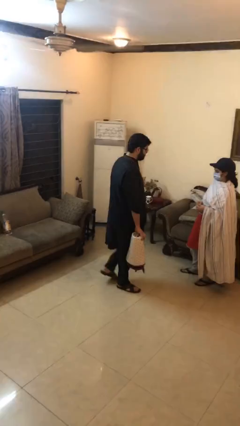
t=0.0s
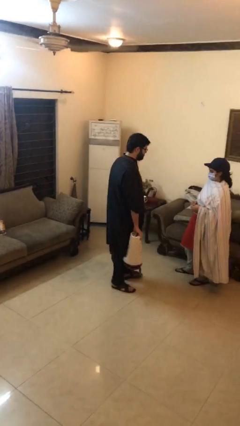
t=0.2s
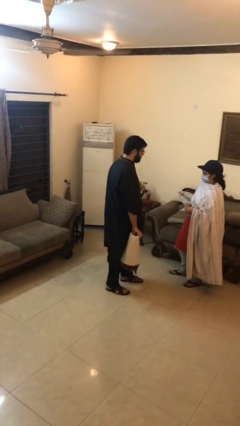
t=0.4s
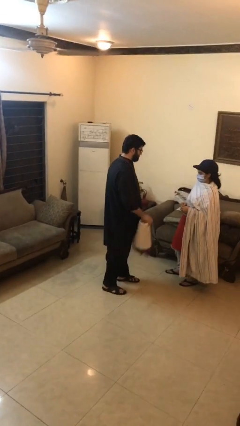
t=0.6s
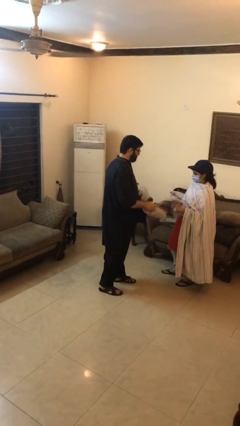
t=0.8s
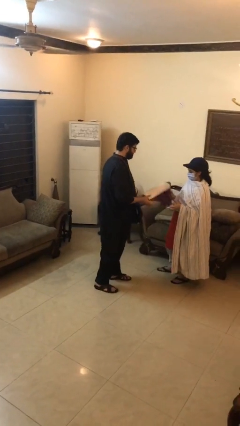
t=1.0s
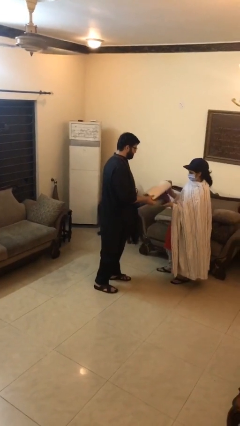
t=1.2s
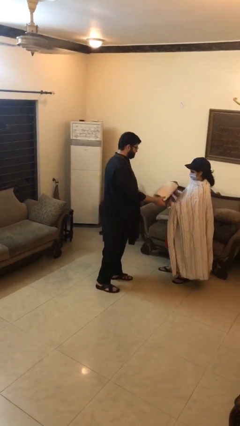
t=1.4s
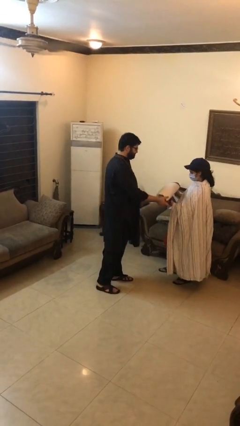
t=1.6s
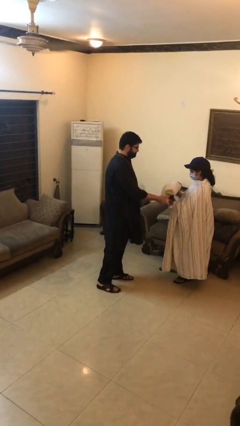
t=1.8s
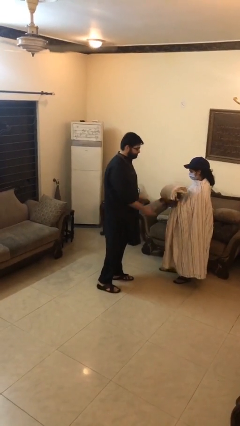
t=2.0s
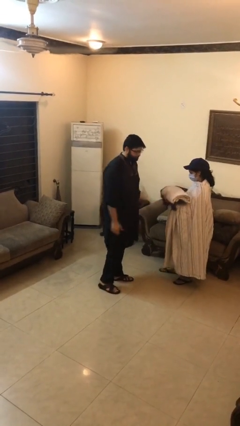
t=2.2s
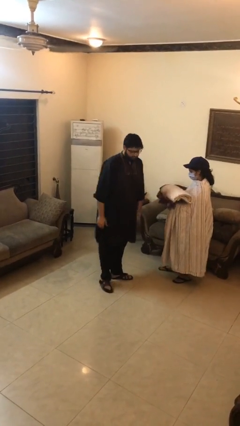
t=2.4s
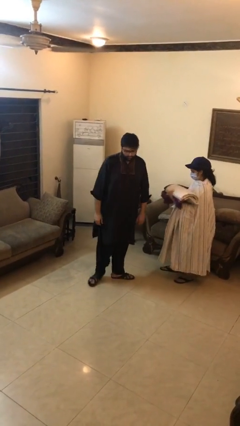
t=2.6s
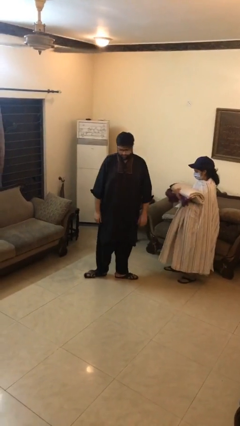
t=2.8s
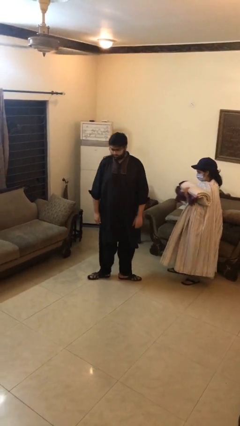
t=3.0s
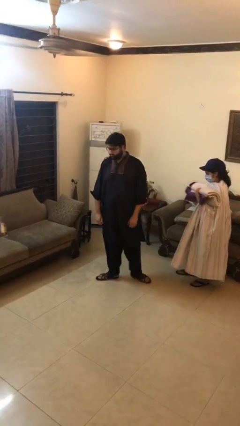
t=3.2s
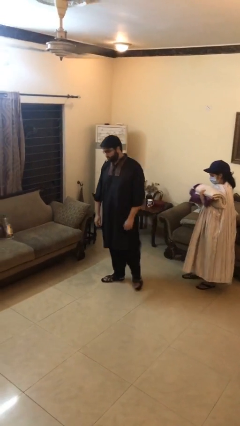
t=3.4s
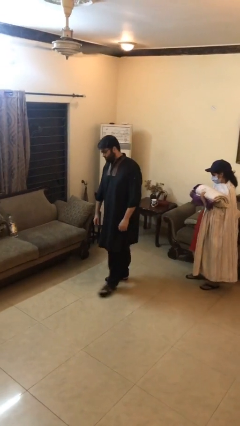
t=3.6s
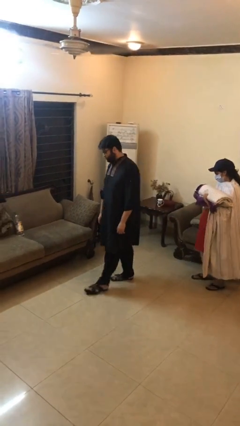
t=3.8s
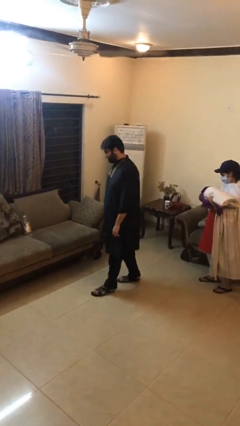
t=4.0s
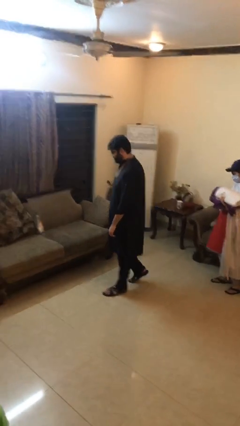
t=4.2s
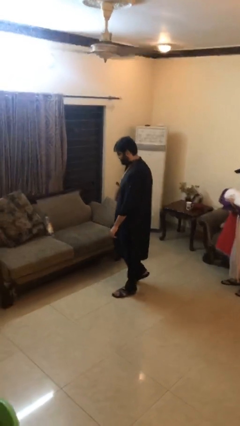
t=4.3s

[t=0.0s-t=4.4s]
person transfers object to person

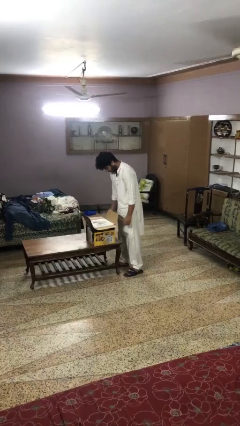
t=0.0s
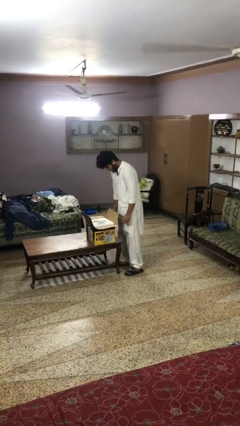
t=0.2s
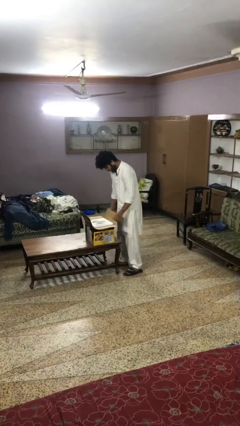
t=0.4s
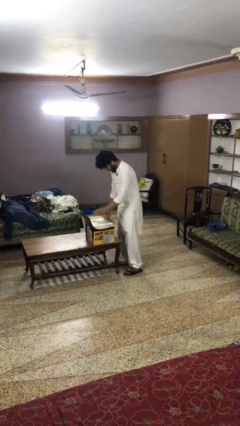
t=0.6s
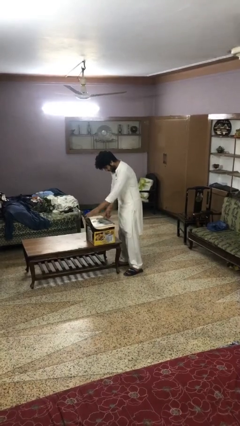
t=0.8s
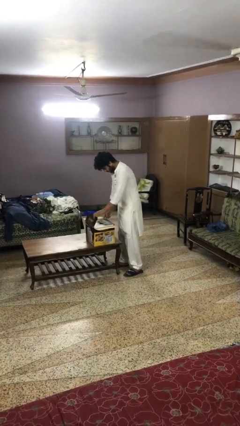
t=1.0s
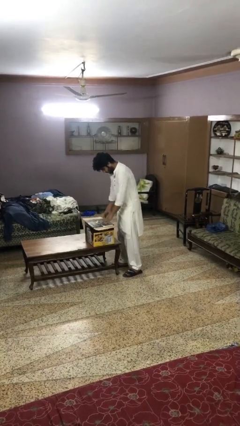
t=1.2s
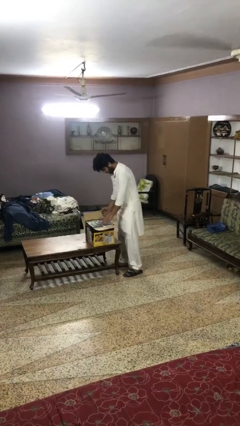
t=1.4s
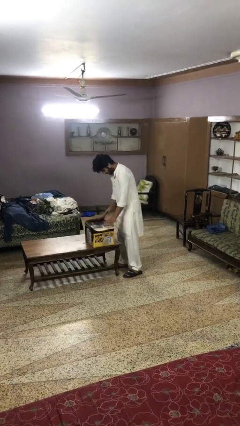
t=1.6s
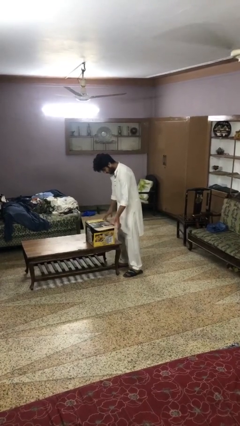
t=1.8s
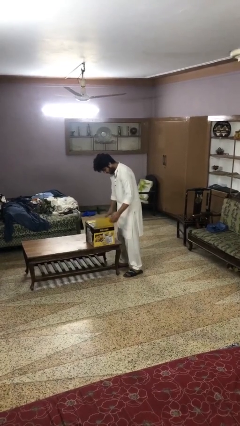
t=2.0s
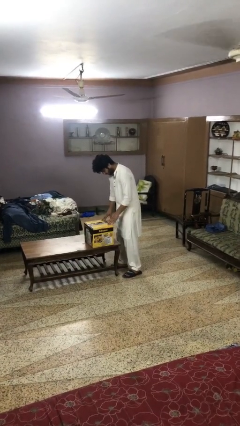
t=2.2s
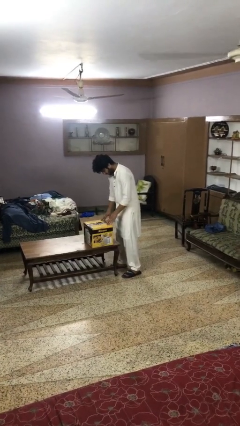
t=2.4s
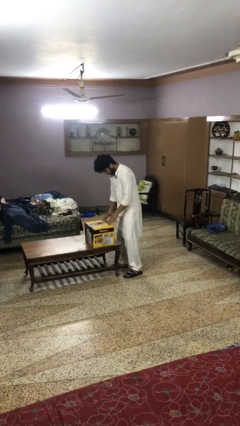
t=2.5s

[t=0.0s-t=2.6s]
person closes box

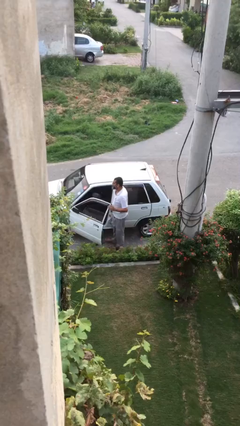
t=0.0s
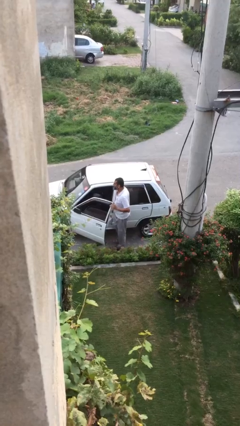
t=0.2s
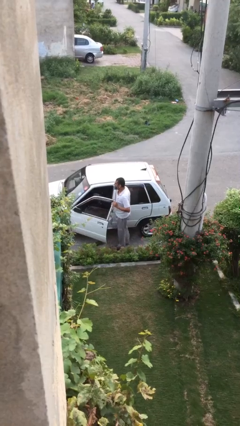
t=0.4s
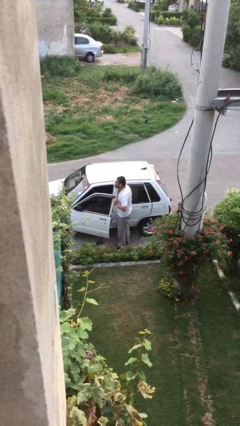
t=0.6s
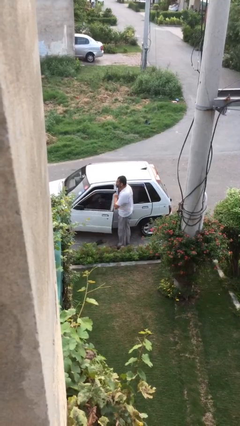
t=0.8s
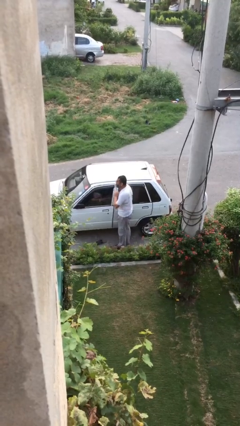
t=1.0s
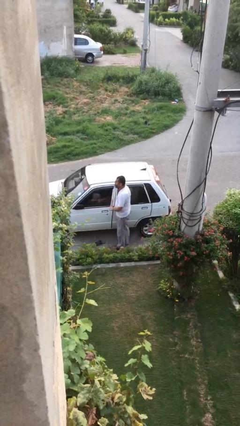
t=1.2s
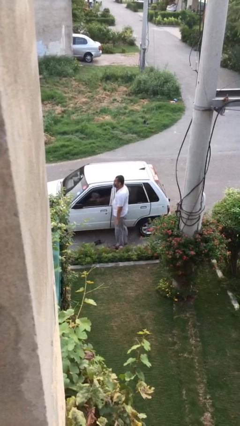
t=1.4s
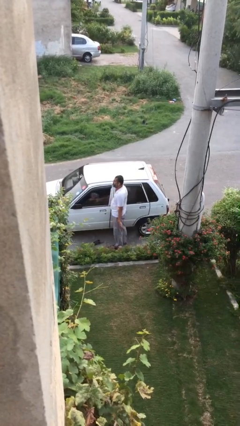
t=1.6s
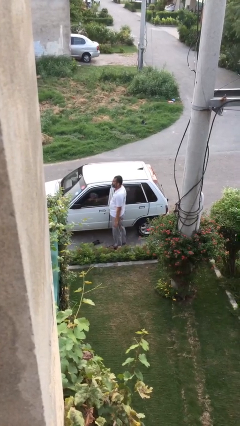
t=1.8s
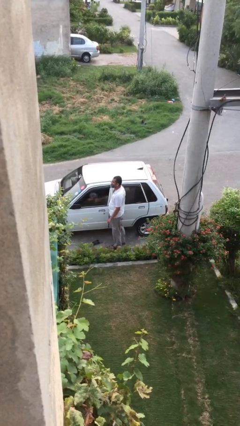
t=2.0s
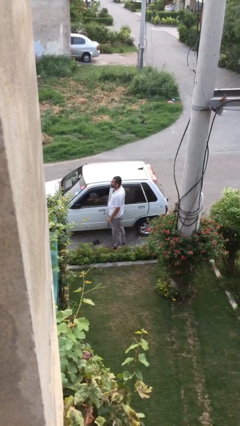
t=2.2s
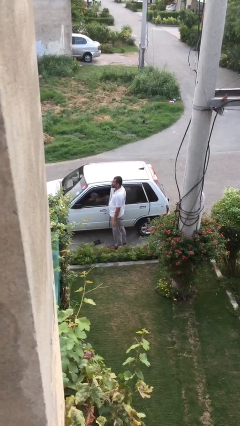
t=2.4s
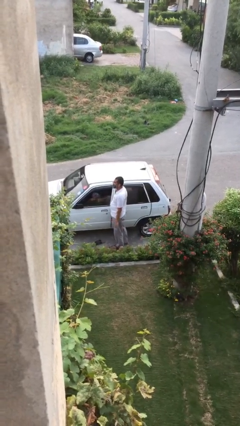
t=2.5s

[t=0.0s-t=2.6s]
person closes car door

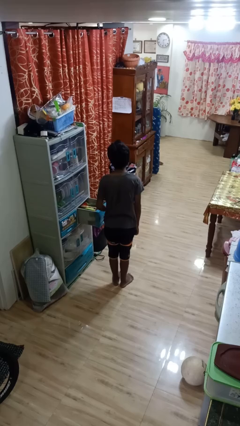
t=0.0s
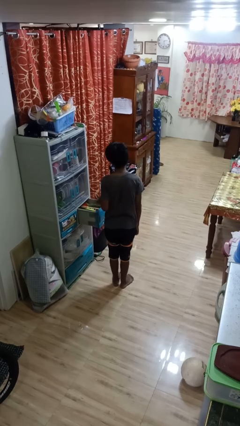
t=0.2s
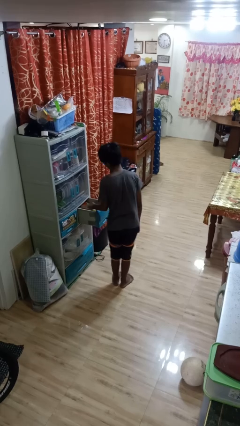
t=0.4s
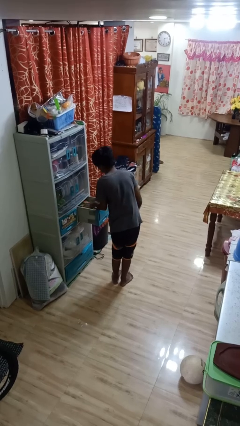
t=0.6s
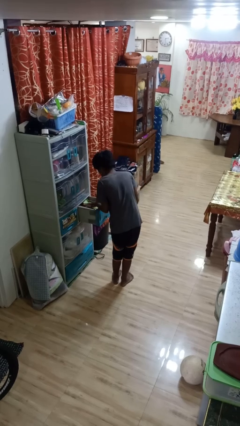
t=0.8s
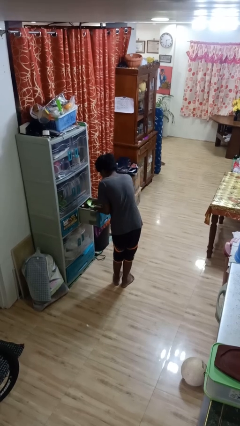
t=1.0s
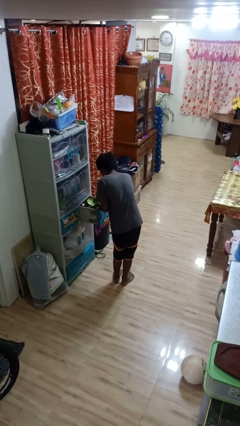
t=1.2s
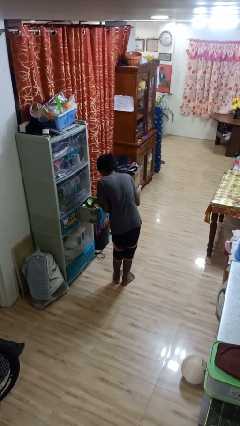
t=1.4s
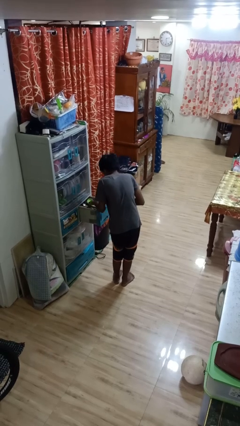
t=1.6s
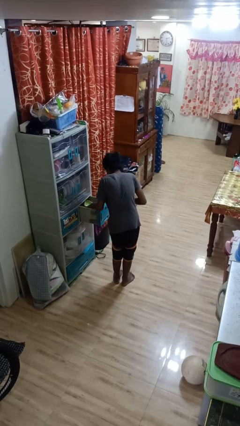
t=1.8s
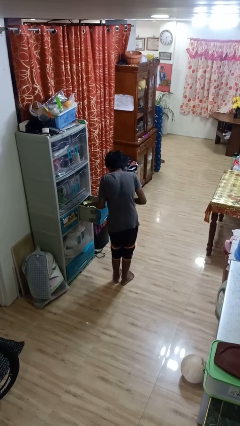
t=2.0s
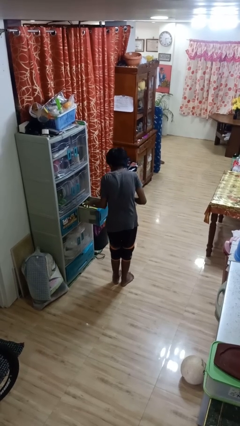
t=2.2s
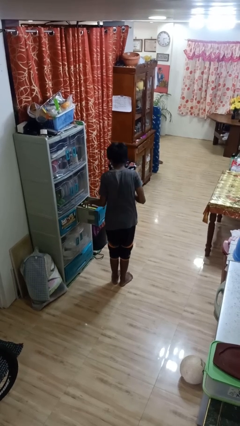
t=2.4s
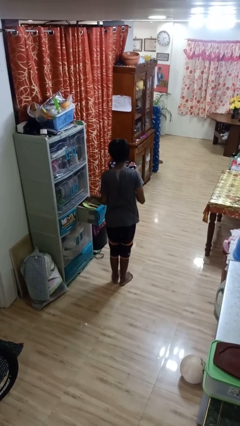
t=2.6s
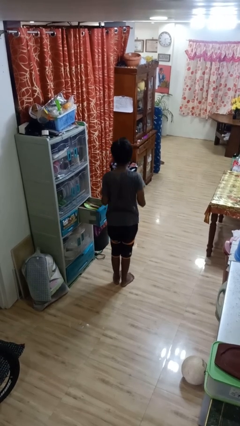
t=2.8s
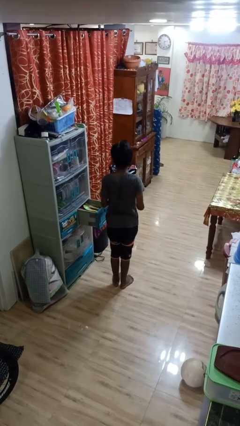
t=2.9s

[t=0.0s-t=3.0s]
person searches in kitchen drawer

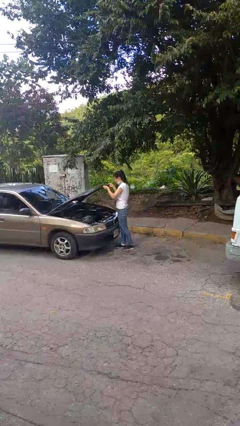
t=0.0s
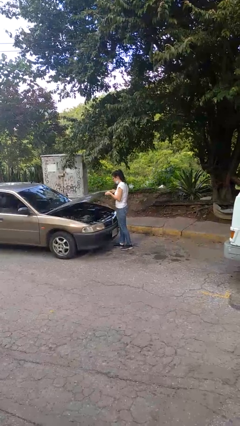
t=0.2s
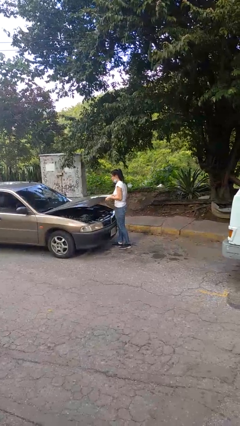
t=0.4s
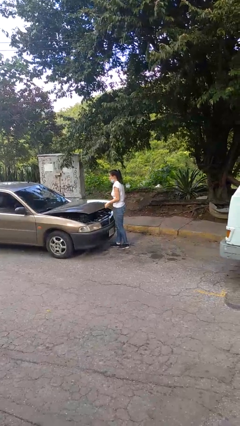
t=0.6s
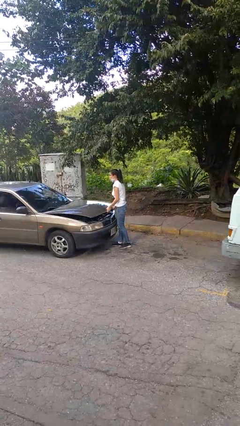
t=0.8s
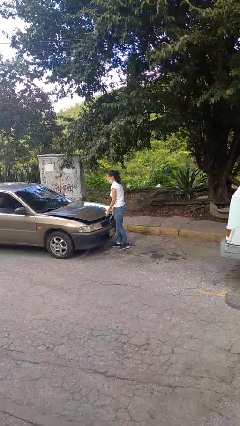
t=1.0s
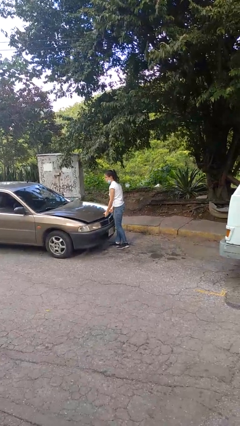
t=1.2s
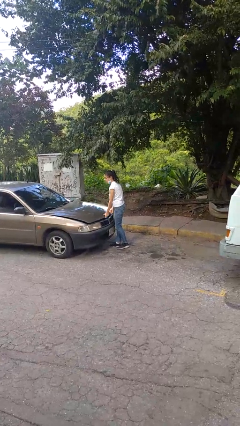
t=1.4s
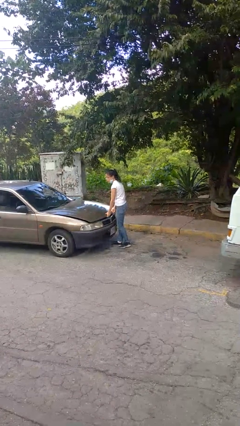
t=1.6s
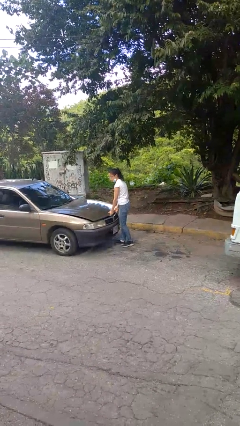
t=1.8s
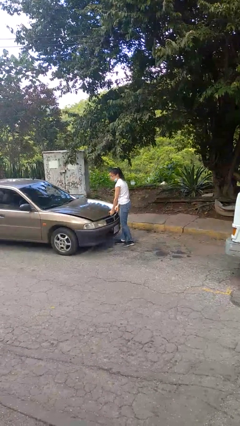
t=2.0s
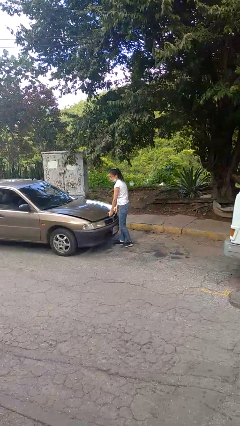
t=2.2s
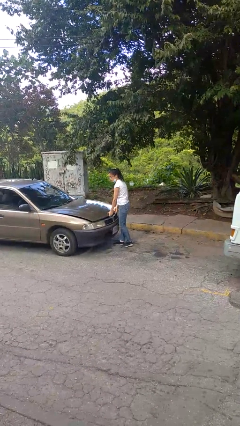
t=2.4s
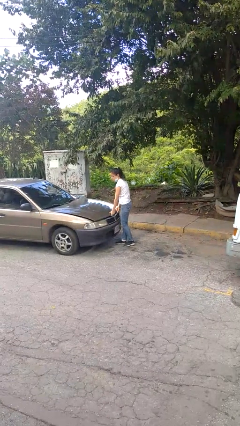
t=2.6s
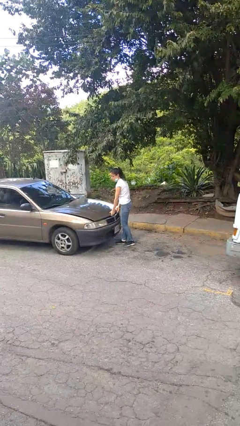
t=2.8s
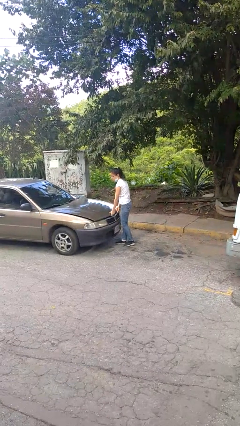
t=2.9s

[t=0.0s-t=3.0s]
person closes car hood

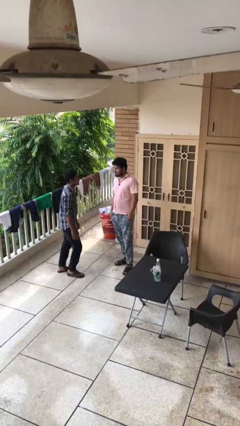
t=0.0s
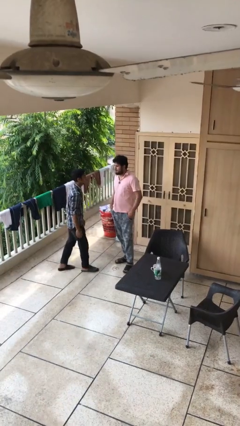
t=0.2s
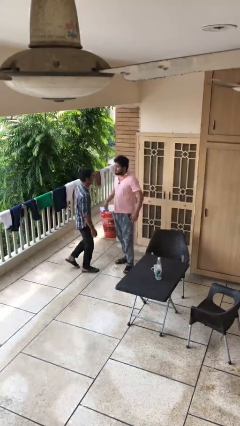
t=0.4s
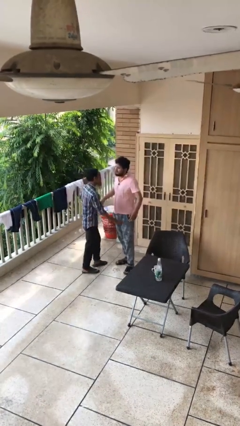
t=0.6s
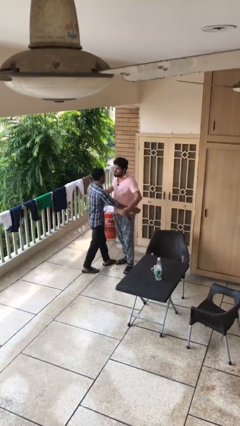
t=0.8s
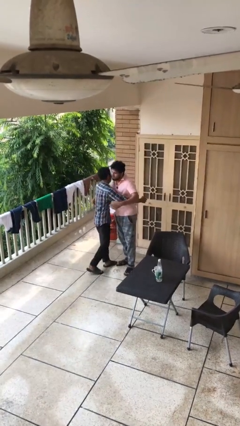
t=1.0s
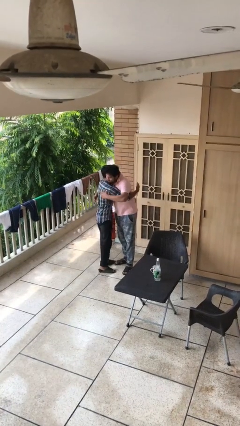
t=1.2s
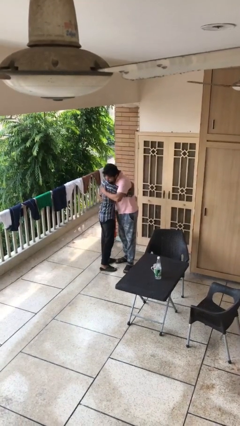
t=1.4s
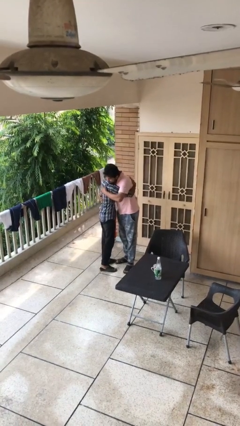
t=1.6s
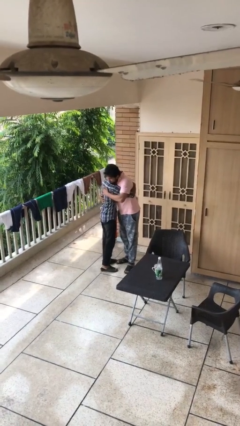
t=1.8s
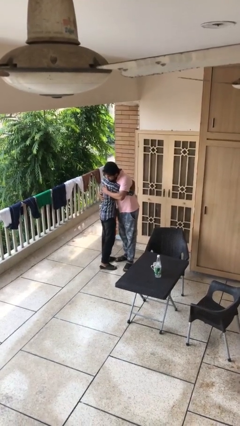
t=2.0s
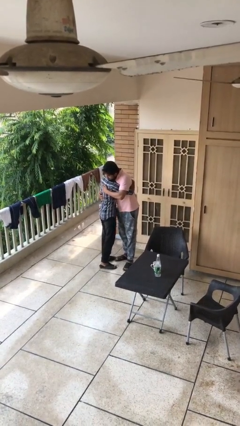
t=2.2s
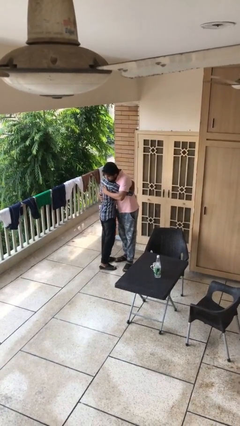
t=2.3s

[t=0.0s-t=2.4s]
person embraces person
